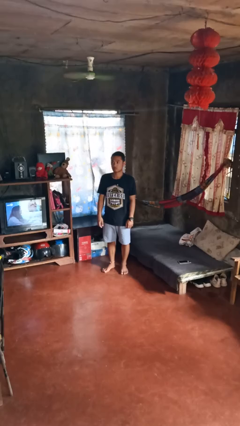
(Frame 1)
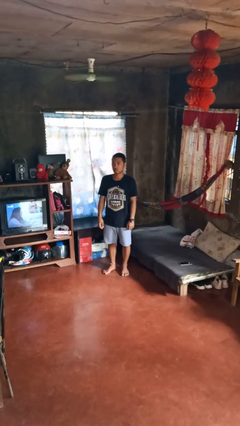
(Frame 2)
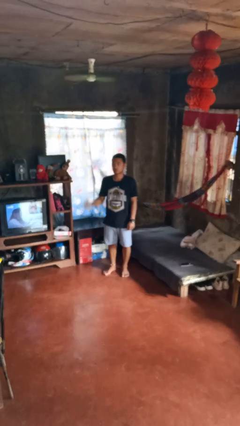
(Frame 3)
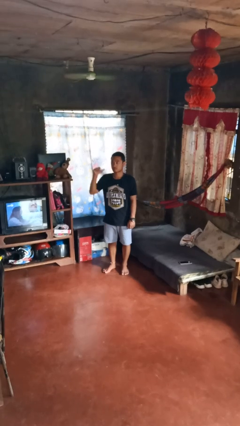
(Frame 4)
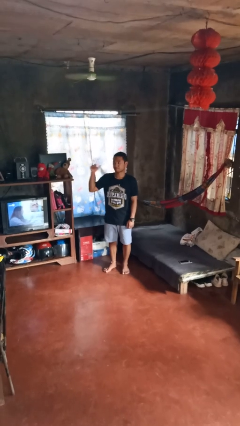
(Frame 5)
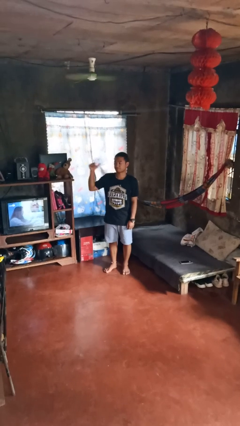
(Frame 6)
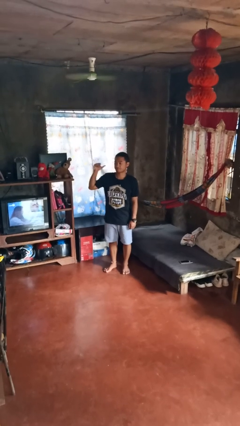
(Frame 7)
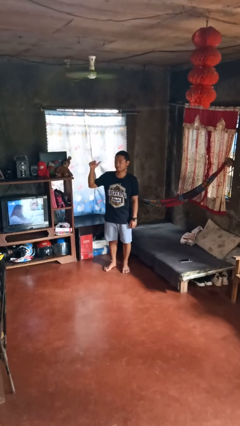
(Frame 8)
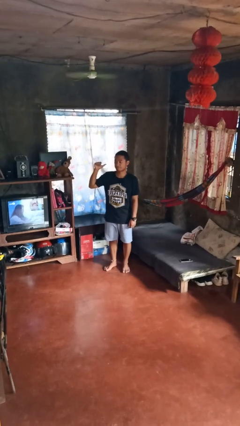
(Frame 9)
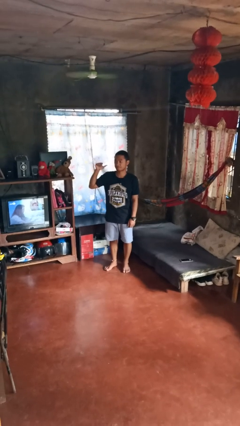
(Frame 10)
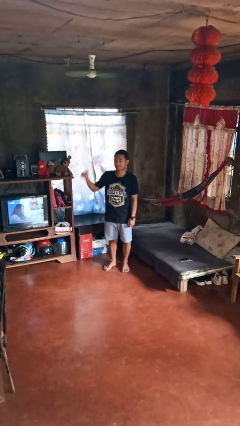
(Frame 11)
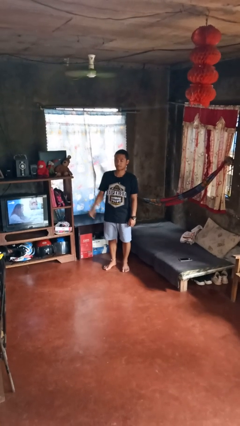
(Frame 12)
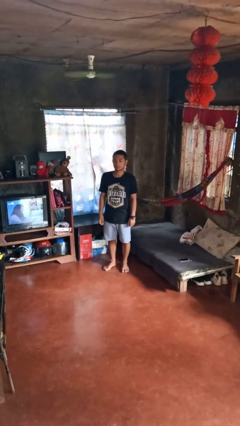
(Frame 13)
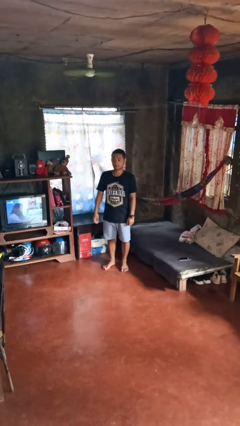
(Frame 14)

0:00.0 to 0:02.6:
person gestures behind me

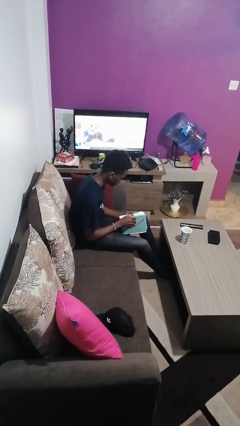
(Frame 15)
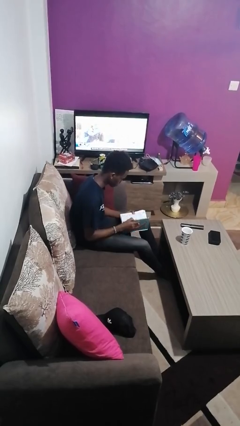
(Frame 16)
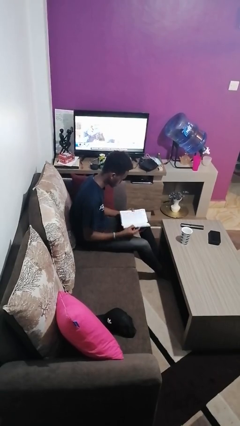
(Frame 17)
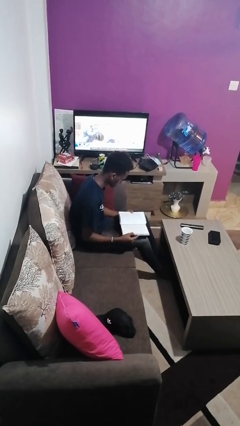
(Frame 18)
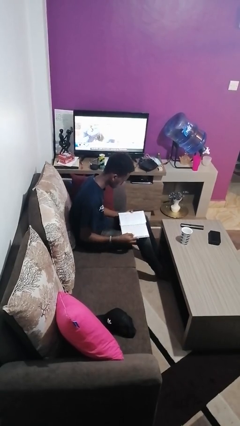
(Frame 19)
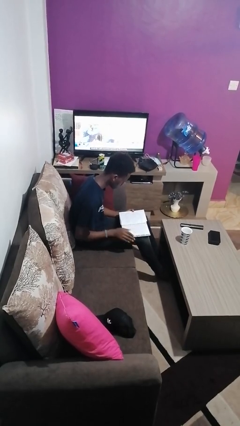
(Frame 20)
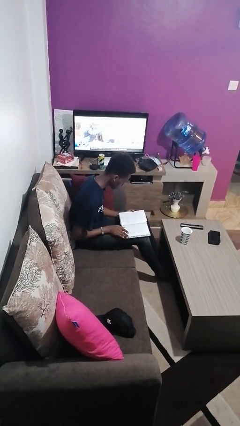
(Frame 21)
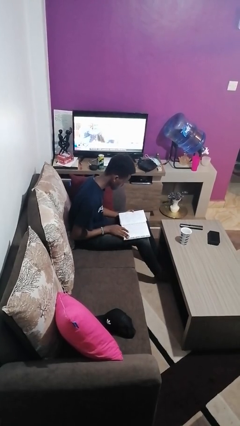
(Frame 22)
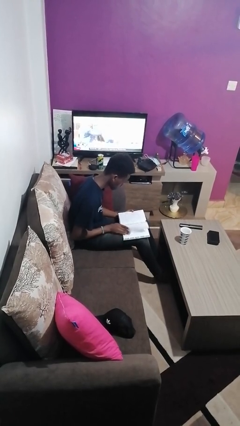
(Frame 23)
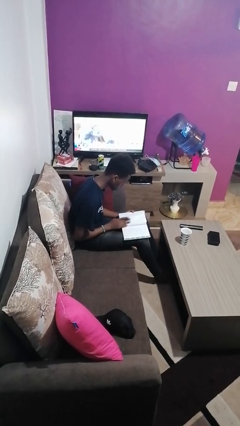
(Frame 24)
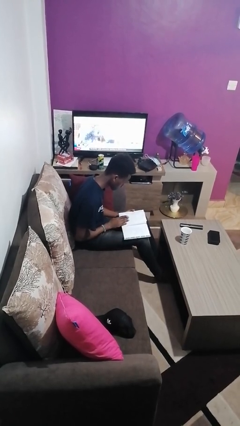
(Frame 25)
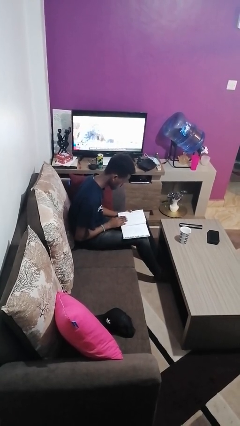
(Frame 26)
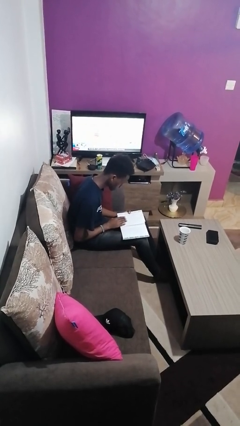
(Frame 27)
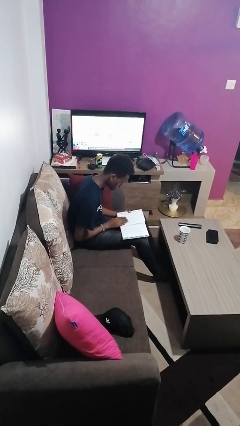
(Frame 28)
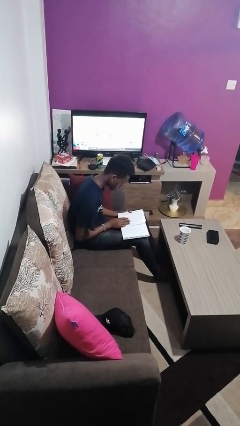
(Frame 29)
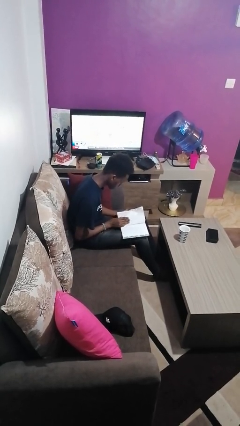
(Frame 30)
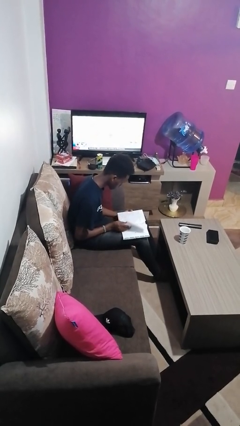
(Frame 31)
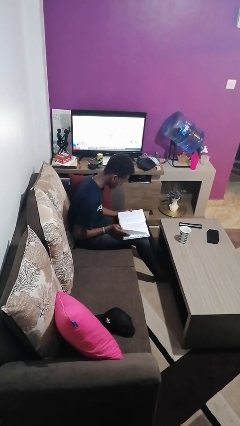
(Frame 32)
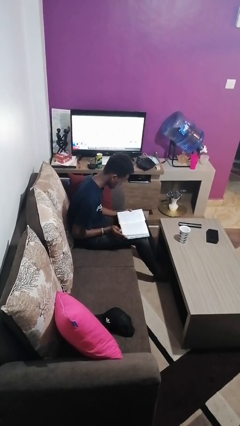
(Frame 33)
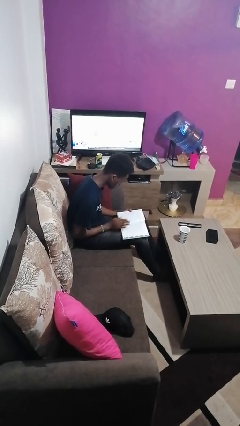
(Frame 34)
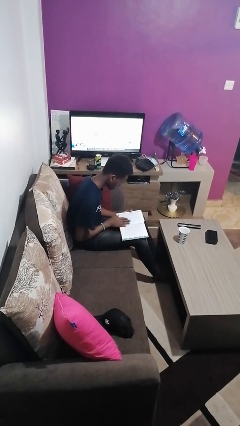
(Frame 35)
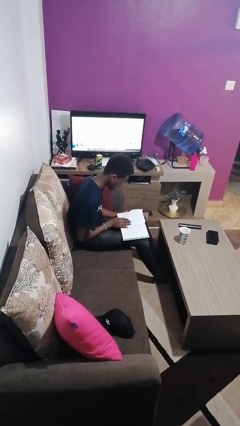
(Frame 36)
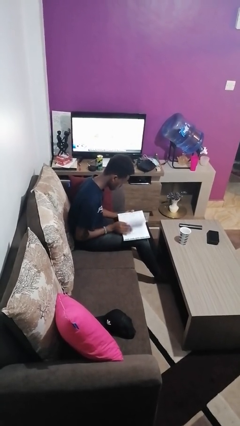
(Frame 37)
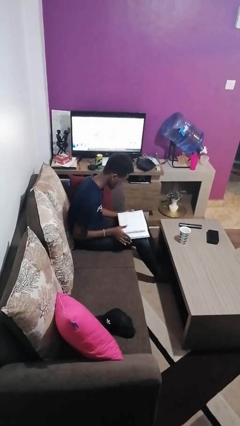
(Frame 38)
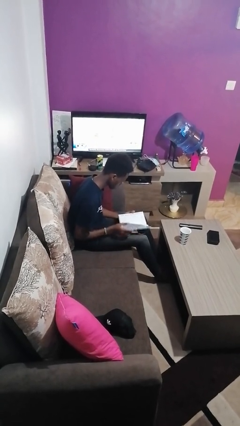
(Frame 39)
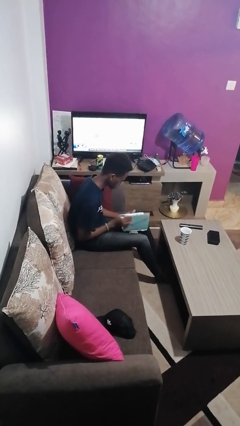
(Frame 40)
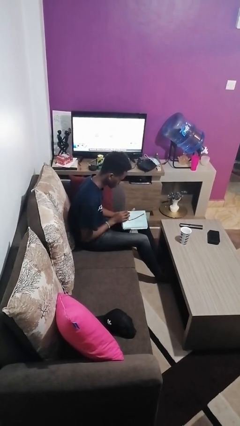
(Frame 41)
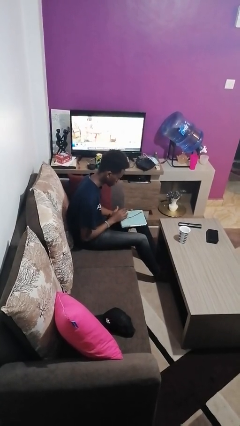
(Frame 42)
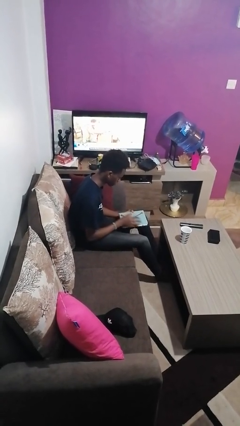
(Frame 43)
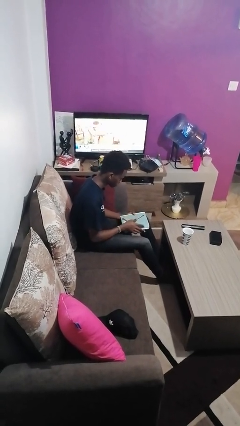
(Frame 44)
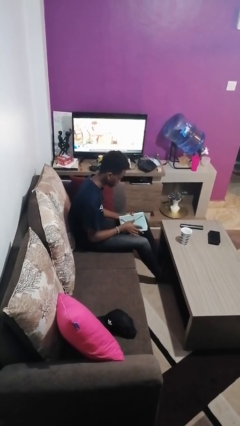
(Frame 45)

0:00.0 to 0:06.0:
person reads book

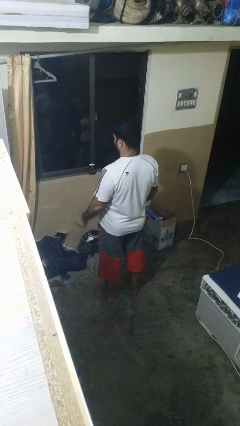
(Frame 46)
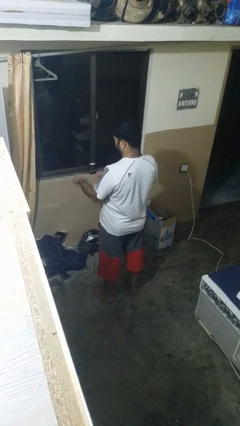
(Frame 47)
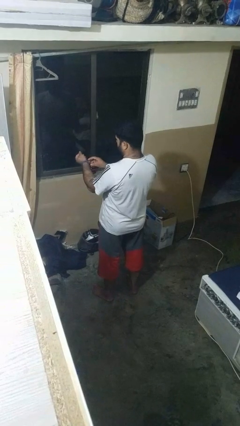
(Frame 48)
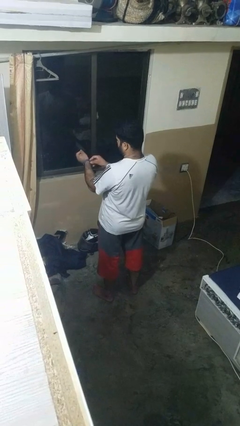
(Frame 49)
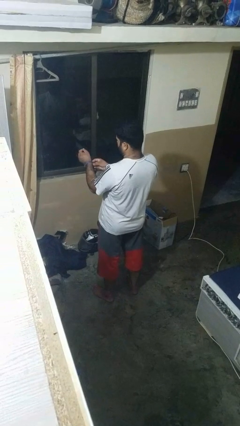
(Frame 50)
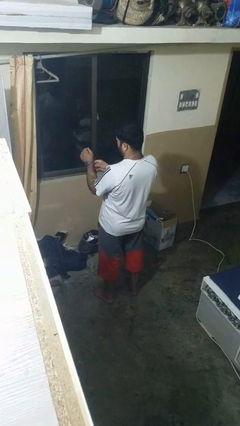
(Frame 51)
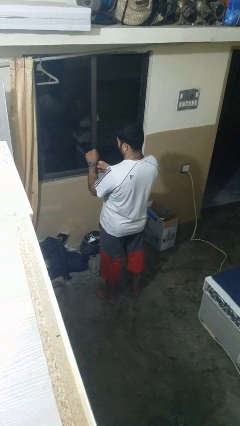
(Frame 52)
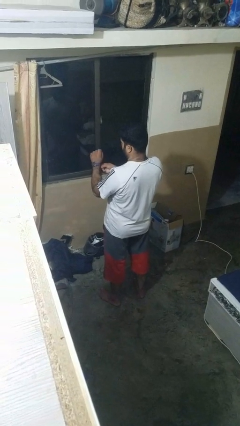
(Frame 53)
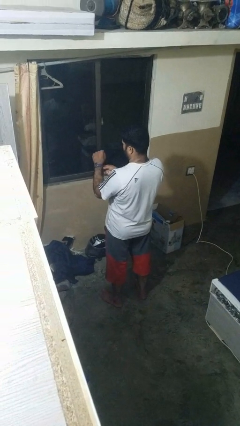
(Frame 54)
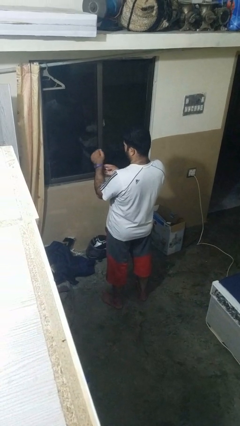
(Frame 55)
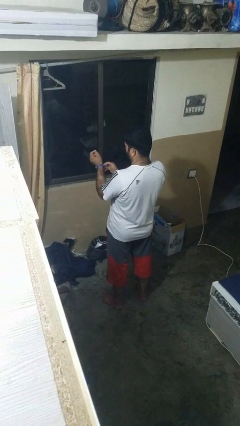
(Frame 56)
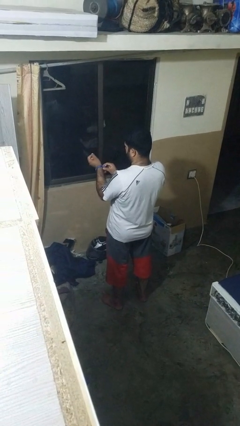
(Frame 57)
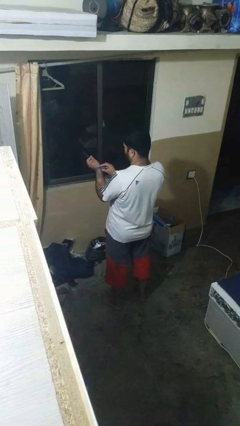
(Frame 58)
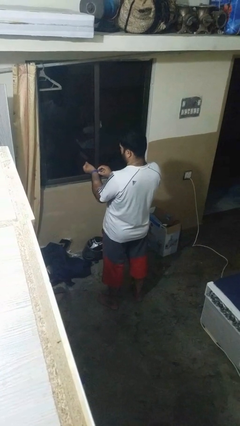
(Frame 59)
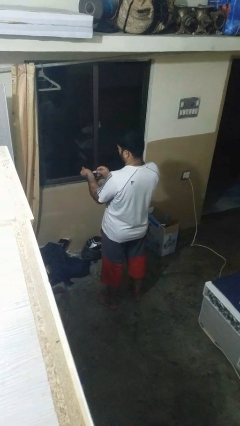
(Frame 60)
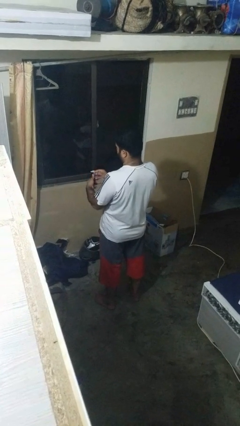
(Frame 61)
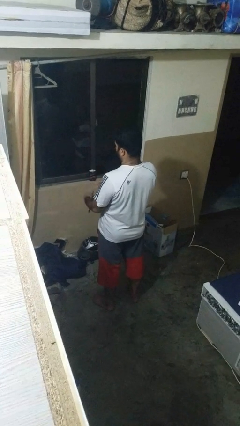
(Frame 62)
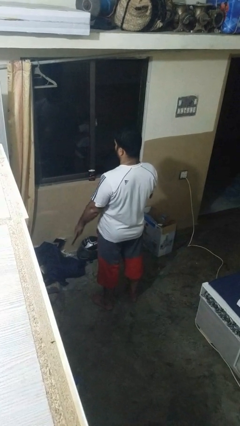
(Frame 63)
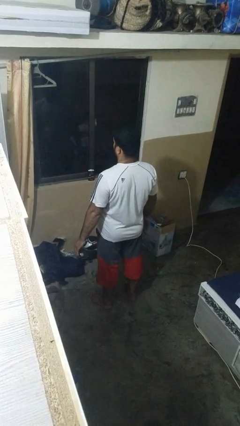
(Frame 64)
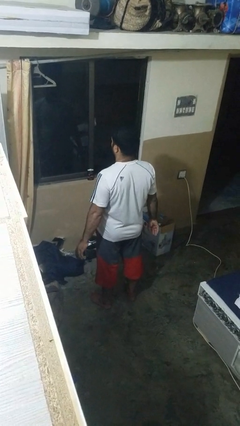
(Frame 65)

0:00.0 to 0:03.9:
person takes off wristwatch

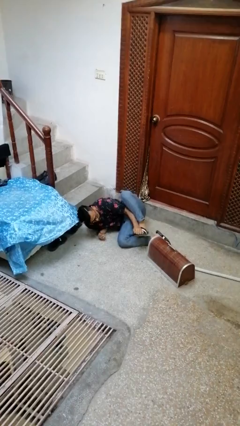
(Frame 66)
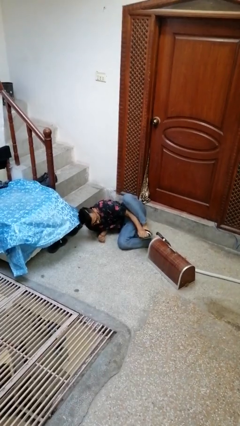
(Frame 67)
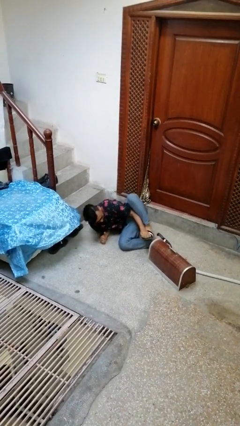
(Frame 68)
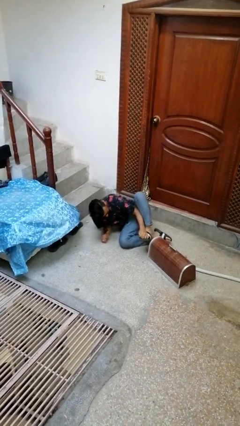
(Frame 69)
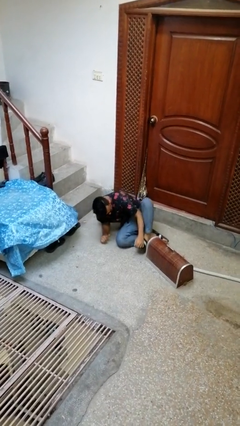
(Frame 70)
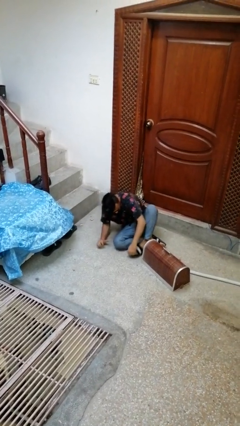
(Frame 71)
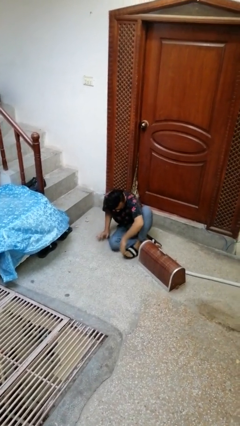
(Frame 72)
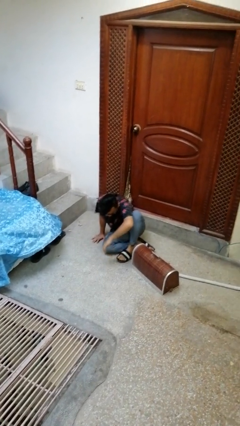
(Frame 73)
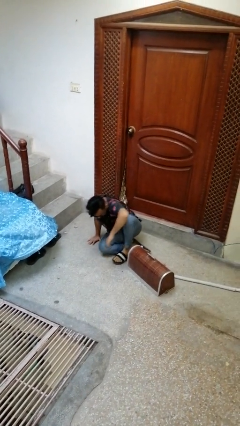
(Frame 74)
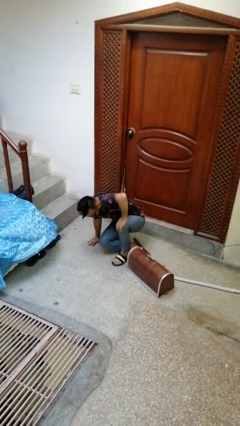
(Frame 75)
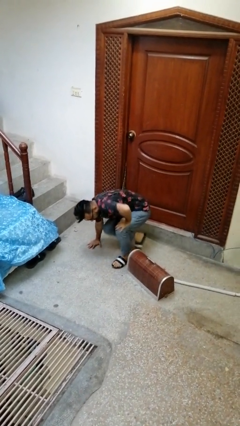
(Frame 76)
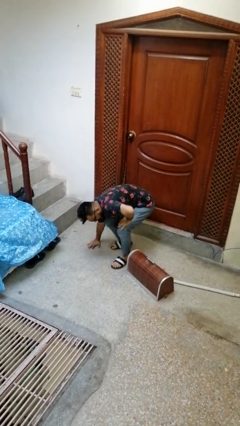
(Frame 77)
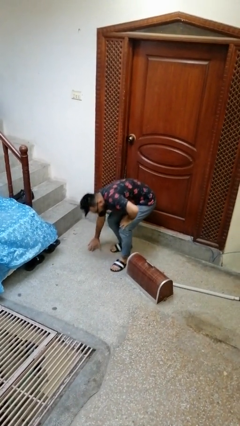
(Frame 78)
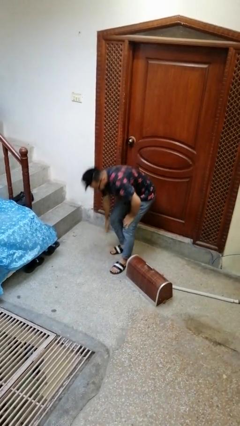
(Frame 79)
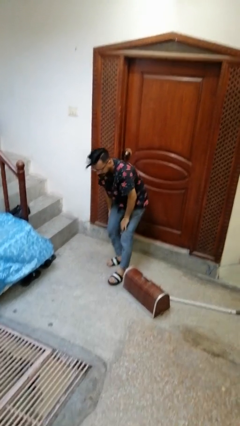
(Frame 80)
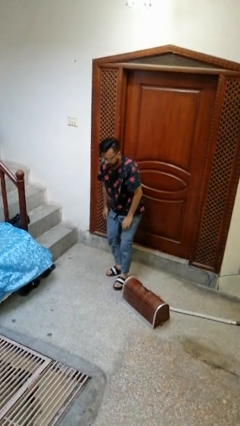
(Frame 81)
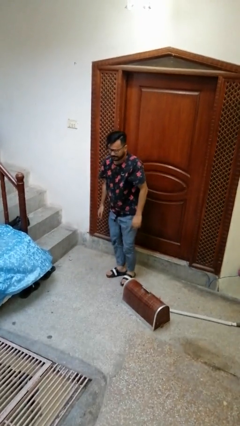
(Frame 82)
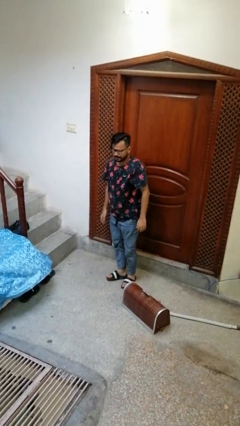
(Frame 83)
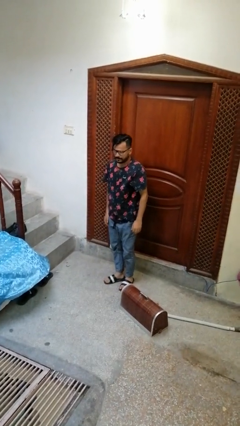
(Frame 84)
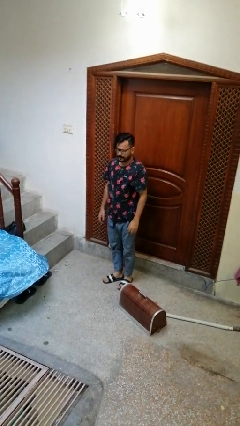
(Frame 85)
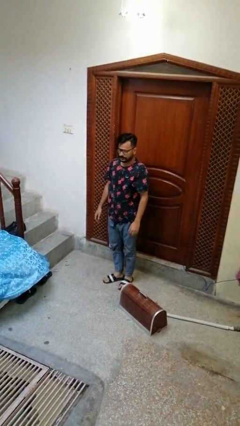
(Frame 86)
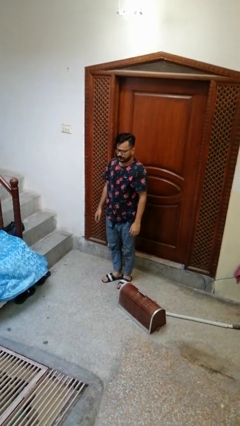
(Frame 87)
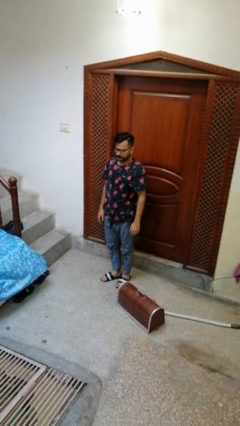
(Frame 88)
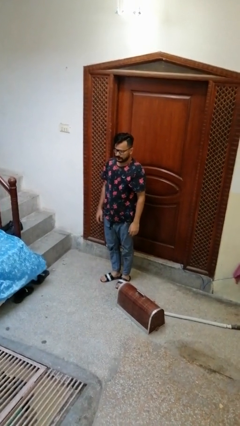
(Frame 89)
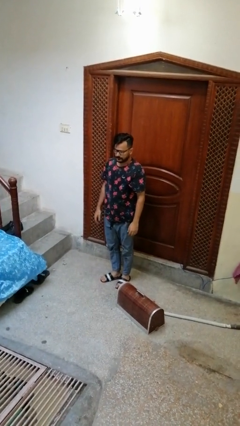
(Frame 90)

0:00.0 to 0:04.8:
person stands up from floor

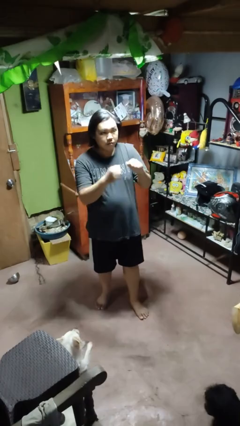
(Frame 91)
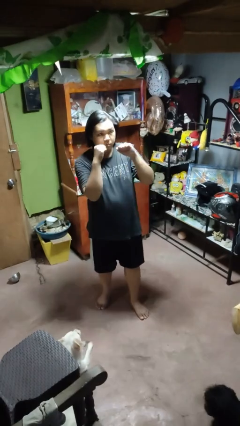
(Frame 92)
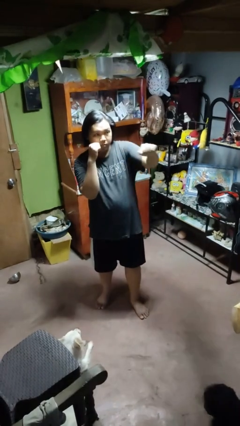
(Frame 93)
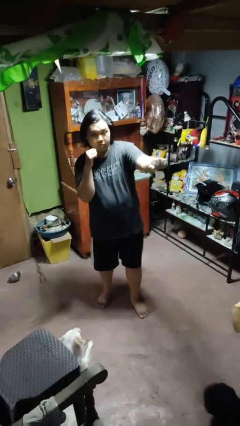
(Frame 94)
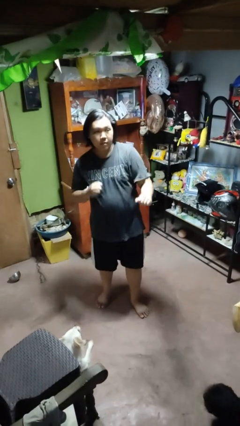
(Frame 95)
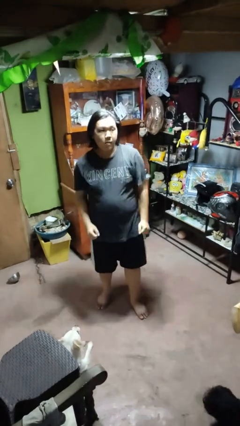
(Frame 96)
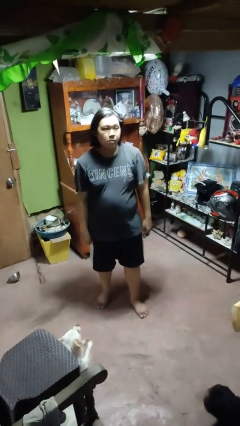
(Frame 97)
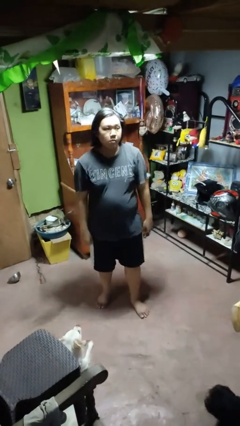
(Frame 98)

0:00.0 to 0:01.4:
person punches
